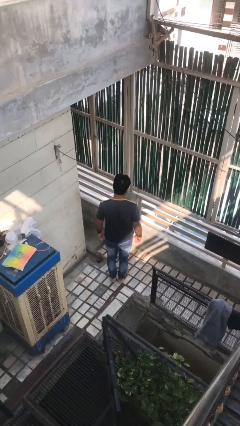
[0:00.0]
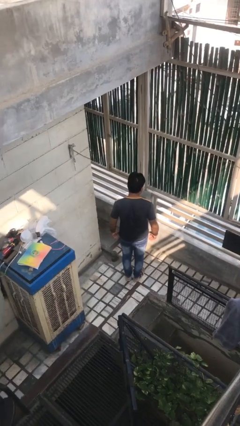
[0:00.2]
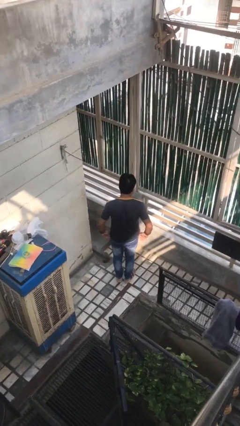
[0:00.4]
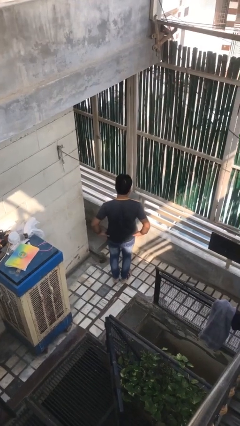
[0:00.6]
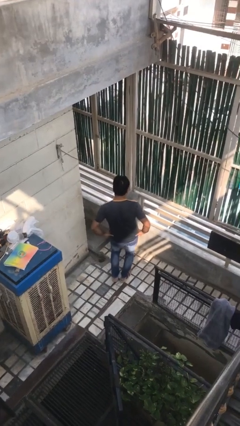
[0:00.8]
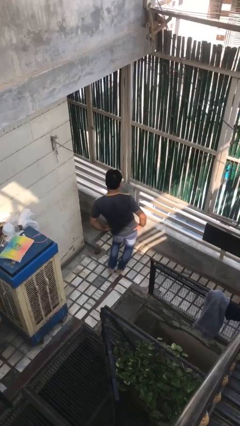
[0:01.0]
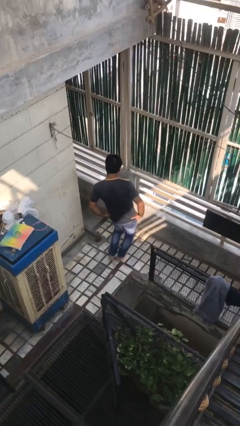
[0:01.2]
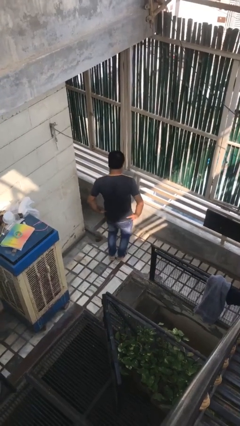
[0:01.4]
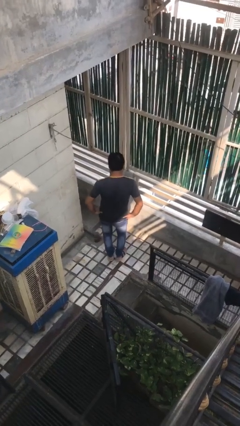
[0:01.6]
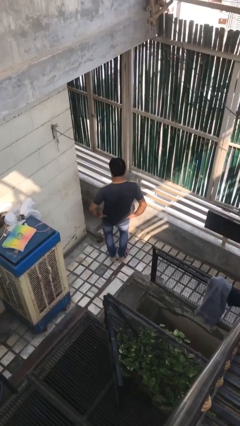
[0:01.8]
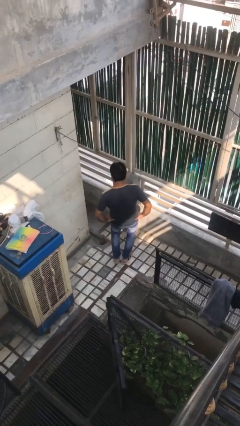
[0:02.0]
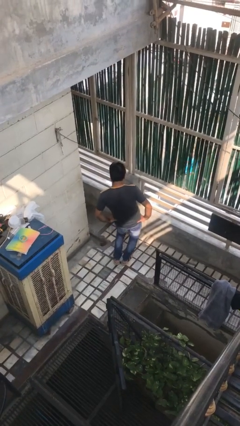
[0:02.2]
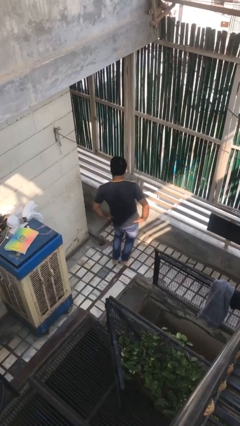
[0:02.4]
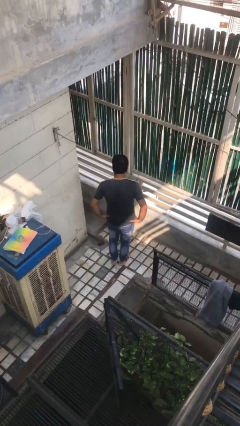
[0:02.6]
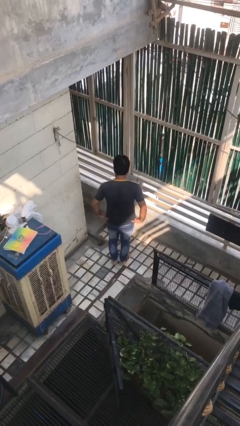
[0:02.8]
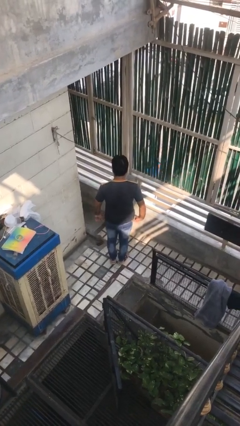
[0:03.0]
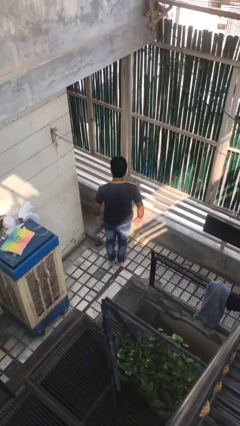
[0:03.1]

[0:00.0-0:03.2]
person wiggles hips

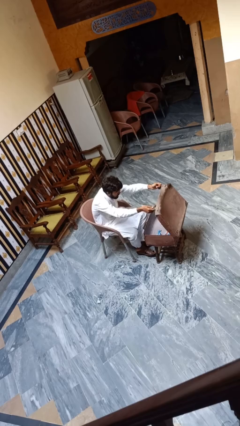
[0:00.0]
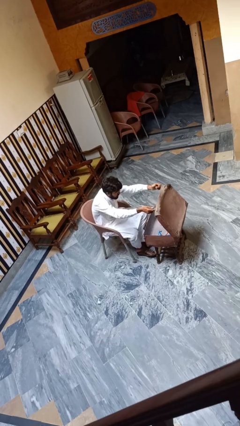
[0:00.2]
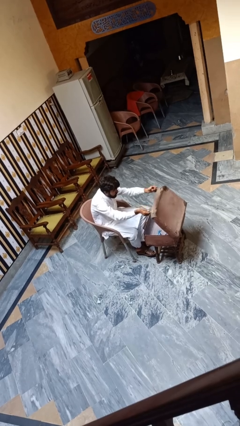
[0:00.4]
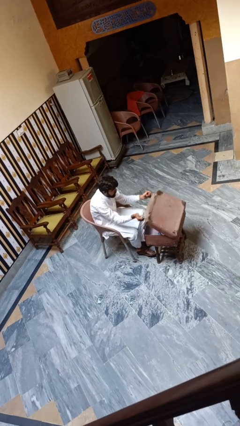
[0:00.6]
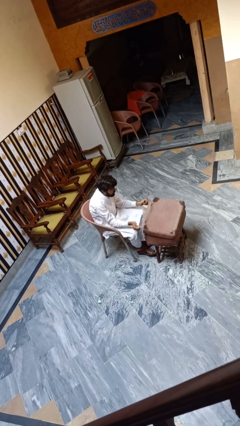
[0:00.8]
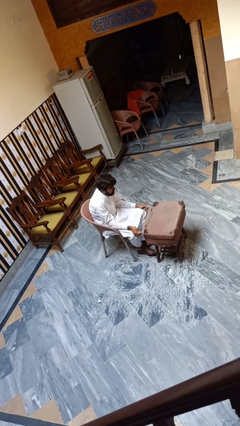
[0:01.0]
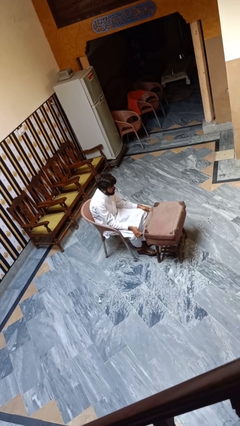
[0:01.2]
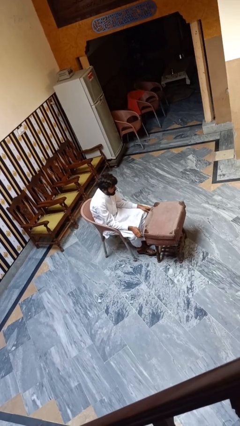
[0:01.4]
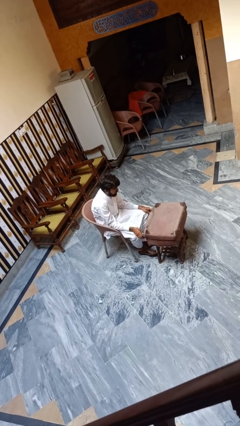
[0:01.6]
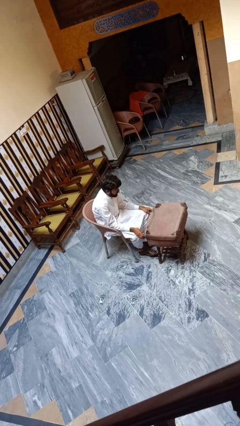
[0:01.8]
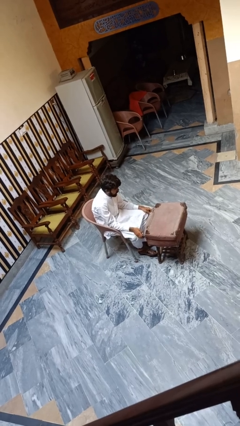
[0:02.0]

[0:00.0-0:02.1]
person closes suitcase

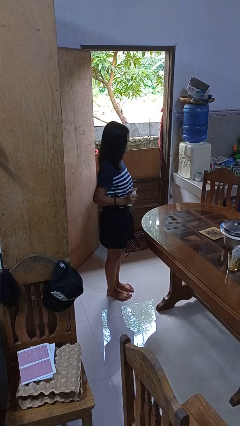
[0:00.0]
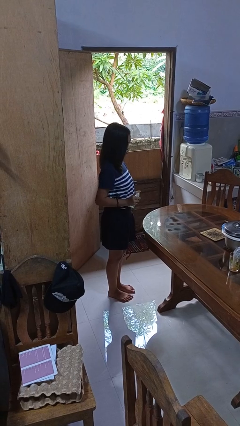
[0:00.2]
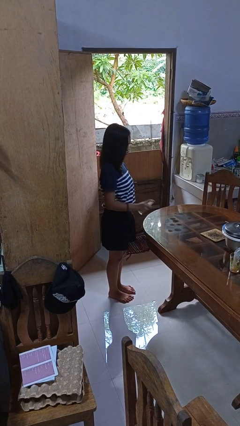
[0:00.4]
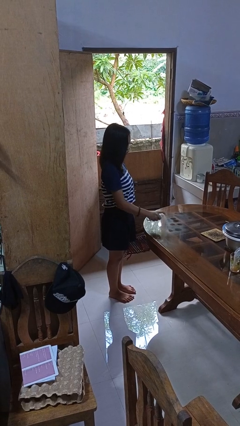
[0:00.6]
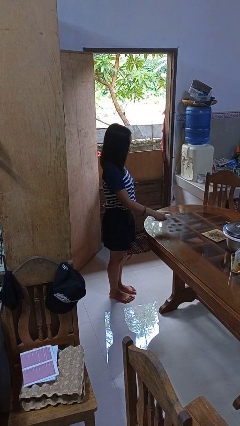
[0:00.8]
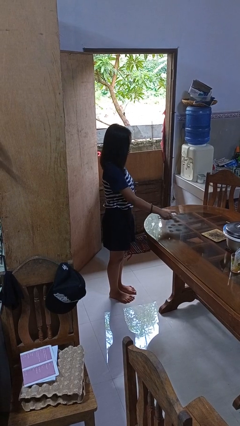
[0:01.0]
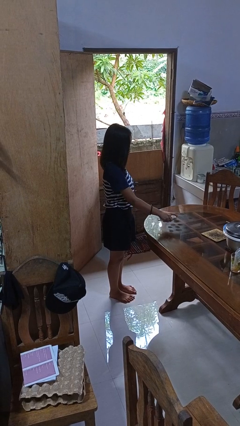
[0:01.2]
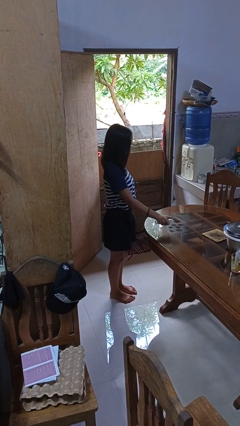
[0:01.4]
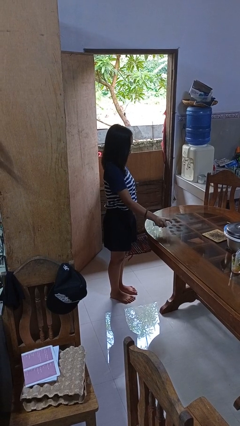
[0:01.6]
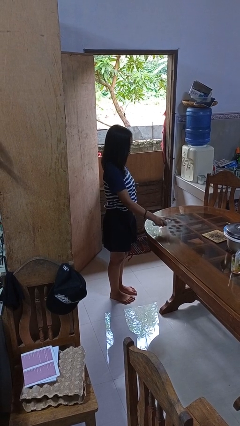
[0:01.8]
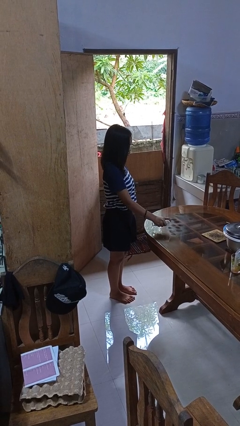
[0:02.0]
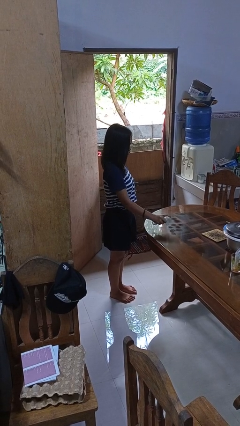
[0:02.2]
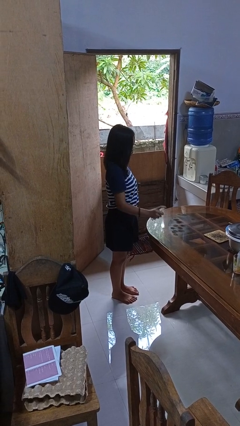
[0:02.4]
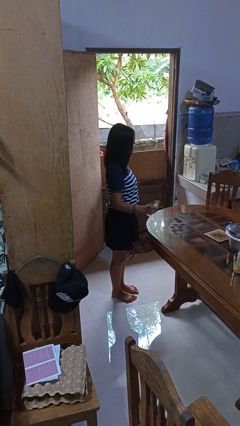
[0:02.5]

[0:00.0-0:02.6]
person sprays from bottle

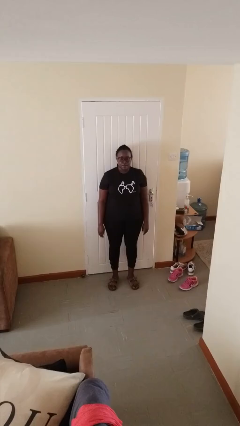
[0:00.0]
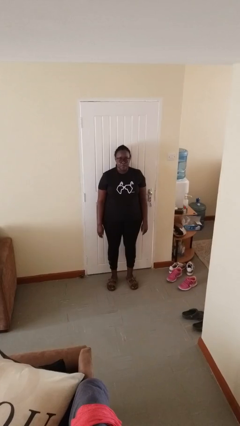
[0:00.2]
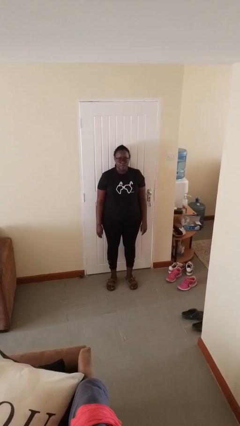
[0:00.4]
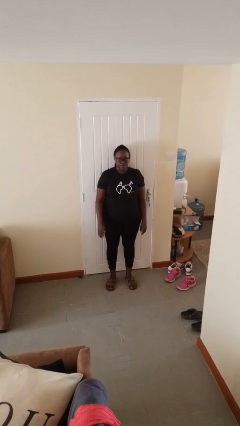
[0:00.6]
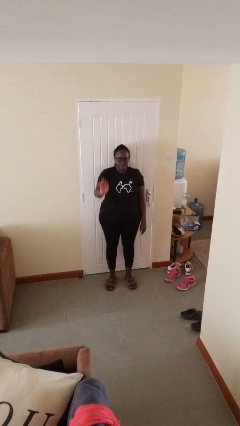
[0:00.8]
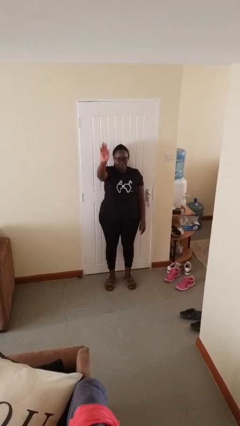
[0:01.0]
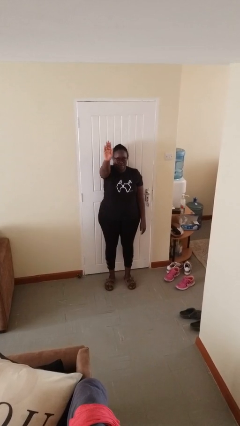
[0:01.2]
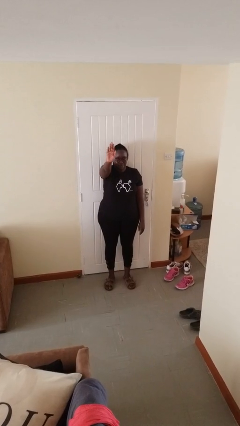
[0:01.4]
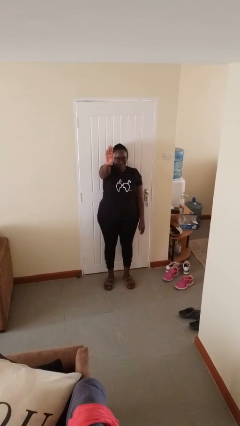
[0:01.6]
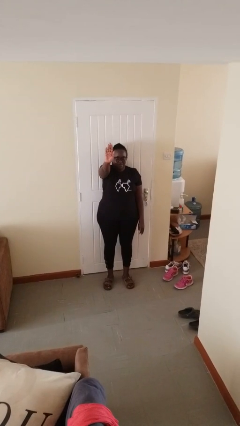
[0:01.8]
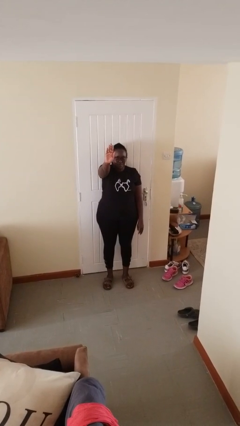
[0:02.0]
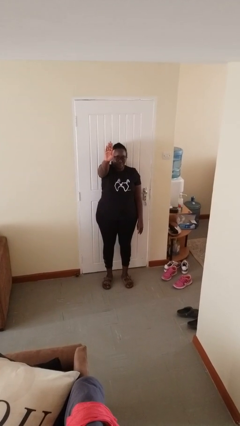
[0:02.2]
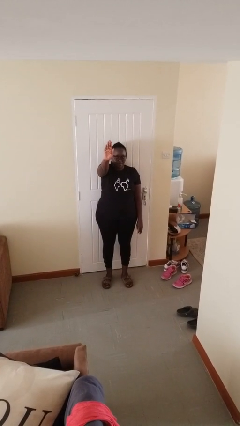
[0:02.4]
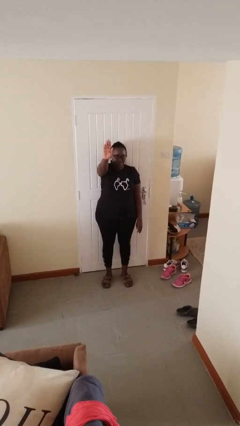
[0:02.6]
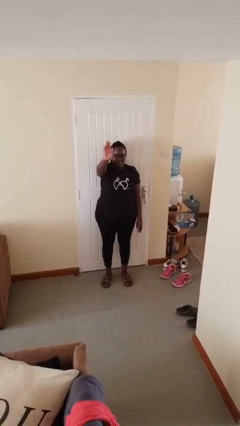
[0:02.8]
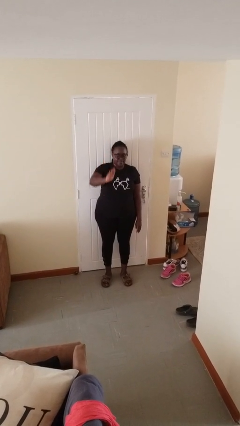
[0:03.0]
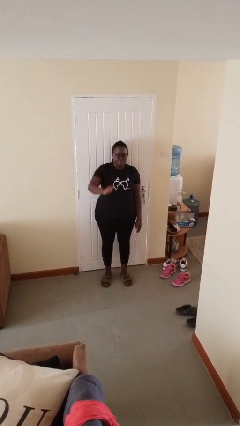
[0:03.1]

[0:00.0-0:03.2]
person gestures stop

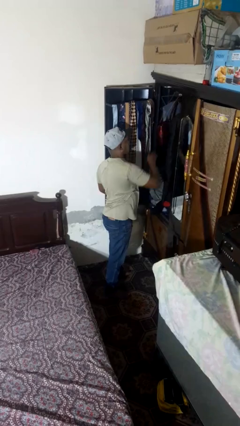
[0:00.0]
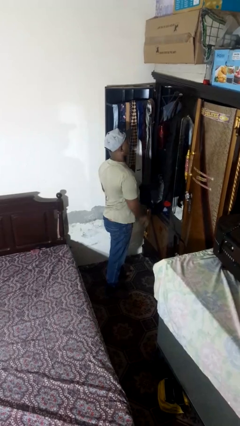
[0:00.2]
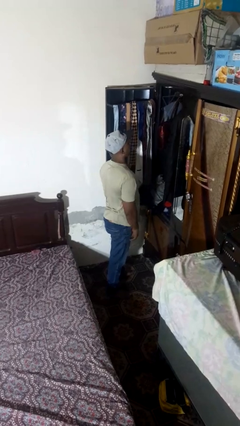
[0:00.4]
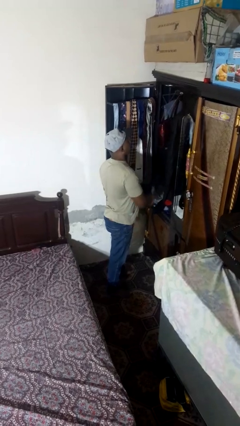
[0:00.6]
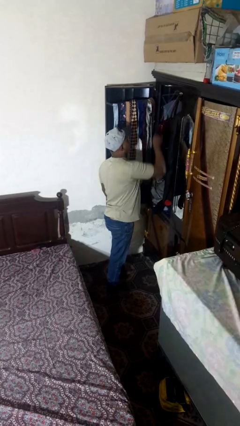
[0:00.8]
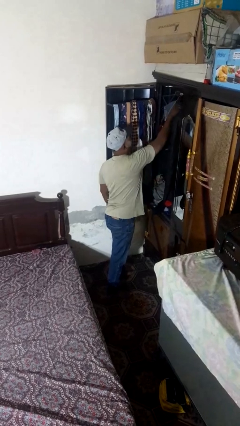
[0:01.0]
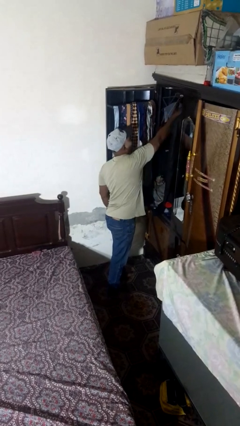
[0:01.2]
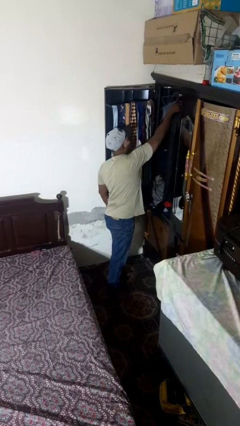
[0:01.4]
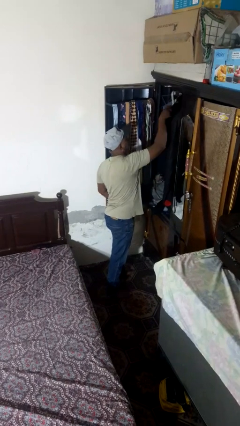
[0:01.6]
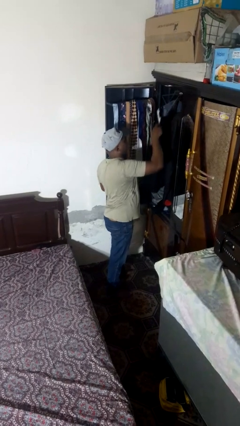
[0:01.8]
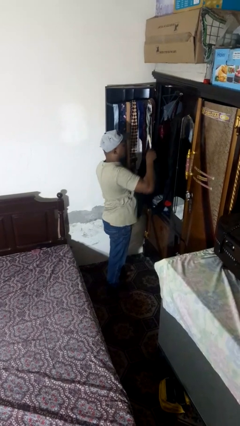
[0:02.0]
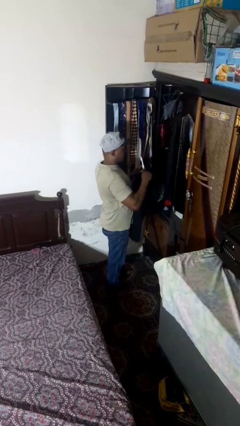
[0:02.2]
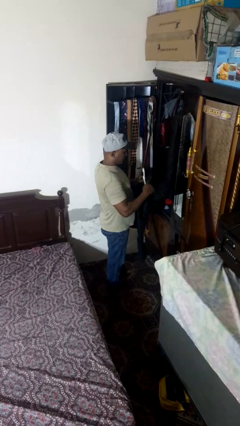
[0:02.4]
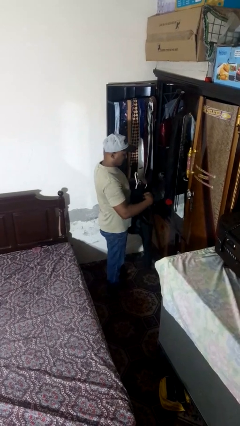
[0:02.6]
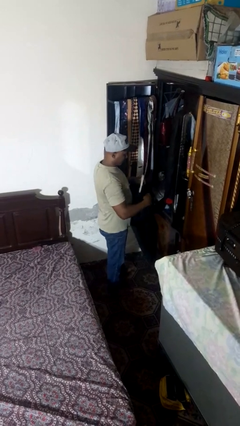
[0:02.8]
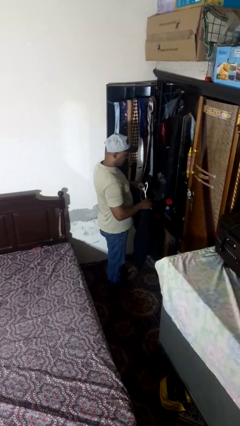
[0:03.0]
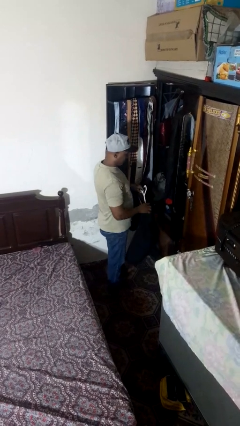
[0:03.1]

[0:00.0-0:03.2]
person takes clothes from closet

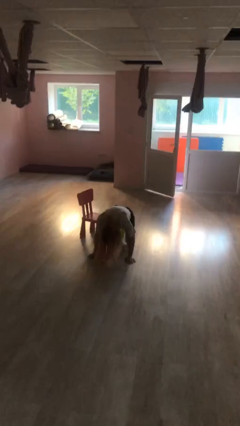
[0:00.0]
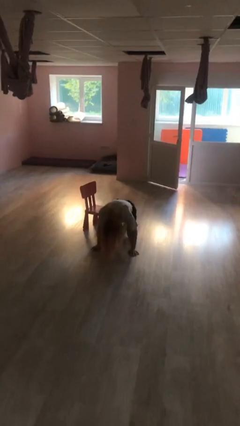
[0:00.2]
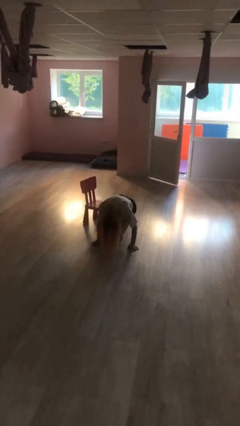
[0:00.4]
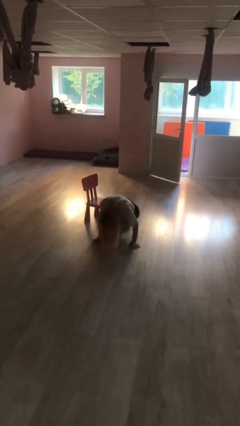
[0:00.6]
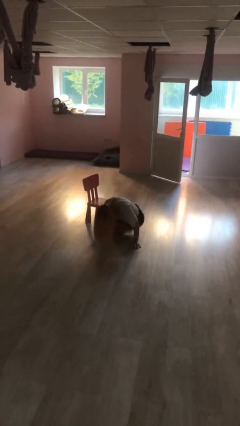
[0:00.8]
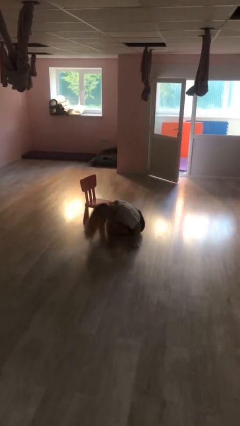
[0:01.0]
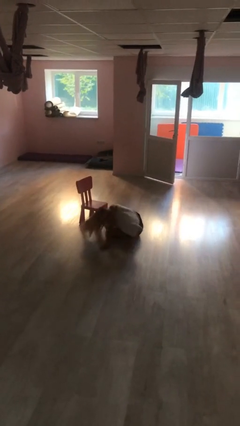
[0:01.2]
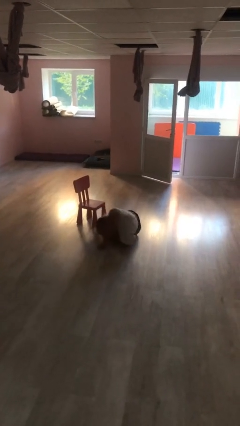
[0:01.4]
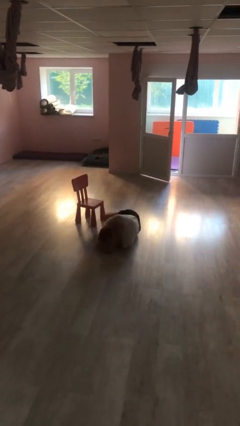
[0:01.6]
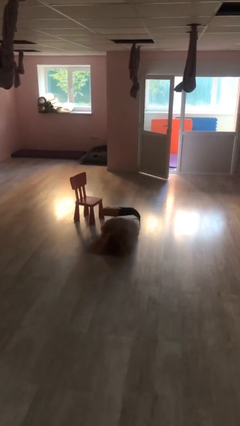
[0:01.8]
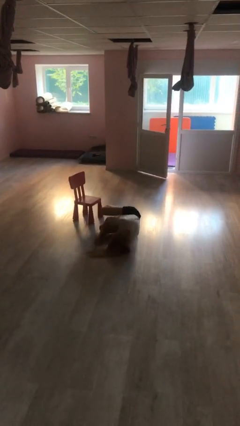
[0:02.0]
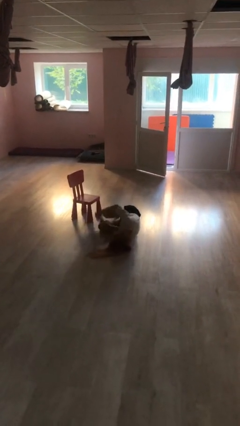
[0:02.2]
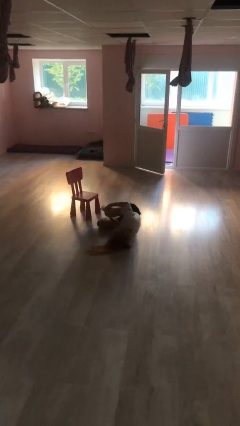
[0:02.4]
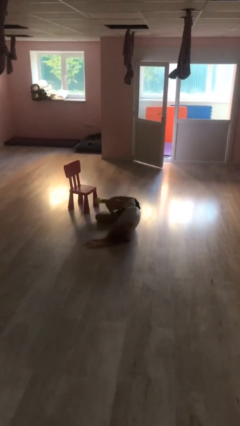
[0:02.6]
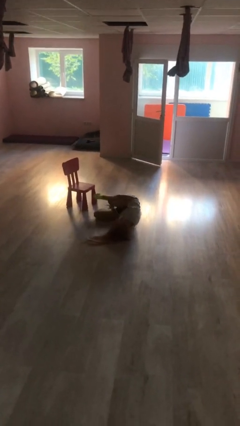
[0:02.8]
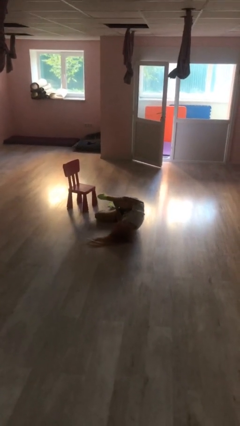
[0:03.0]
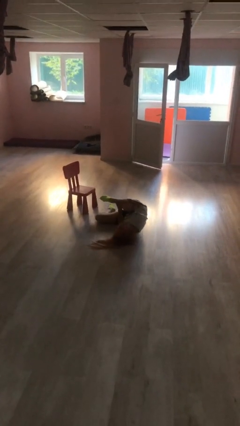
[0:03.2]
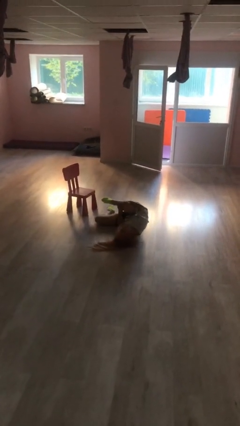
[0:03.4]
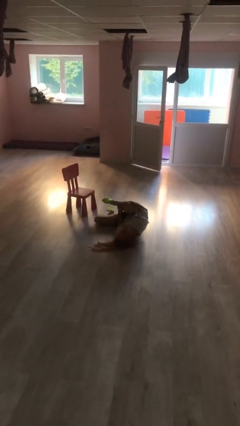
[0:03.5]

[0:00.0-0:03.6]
person lies down on floor
